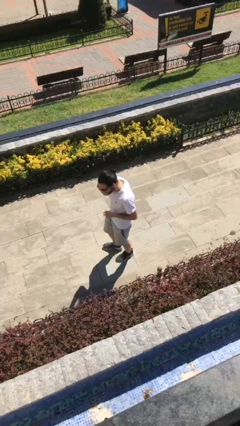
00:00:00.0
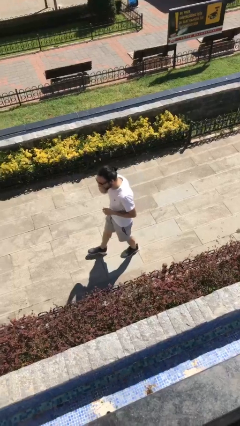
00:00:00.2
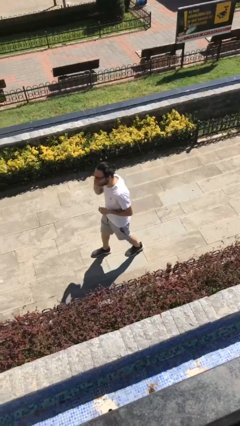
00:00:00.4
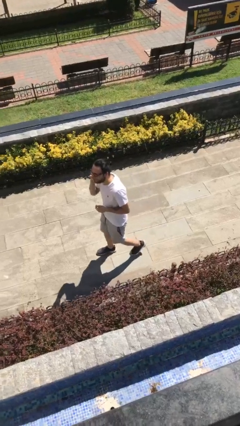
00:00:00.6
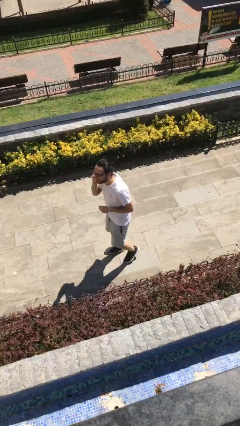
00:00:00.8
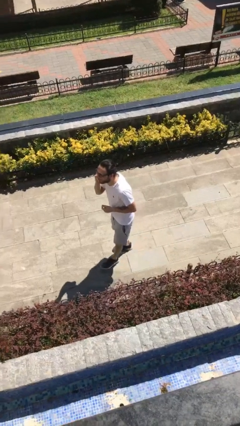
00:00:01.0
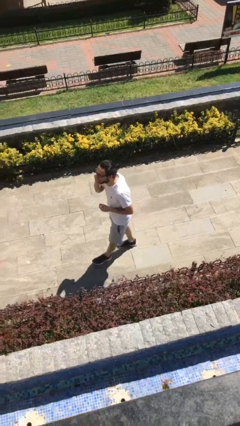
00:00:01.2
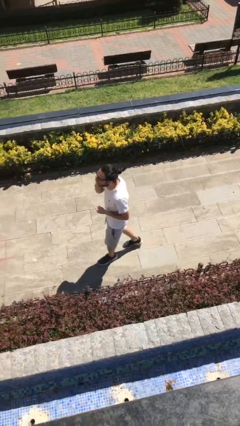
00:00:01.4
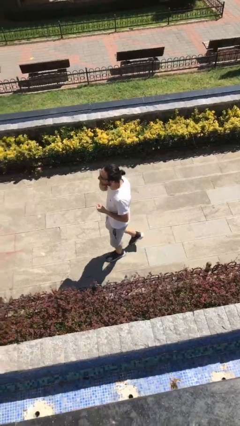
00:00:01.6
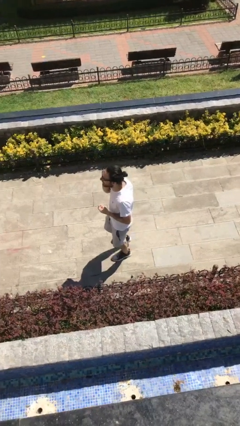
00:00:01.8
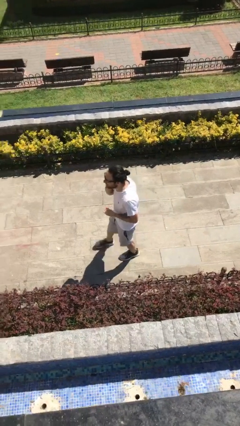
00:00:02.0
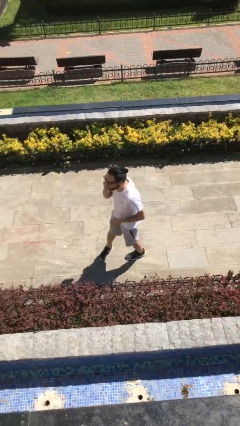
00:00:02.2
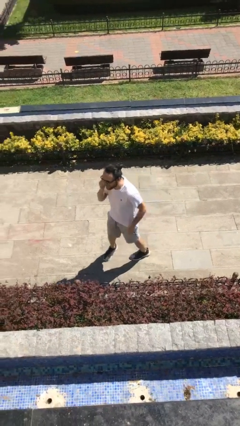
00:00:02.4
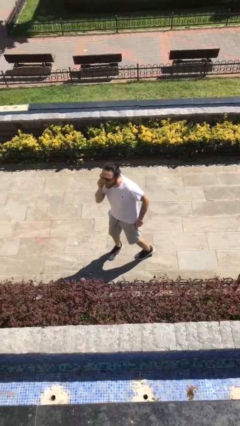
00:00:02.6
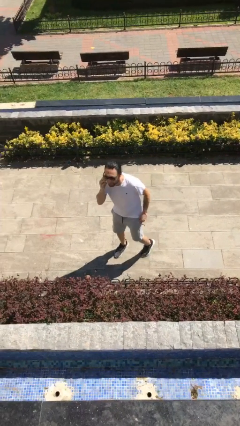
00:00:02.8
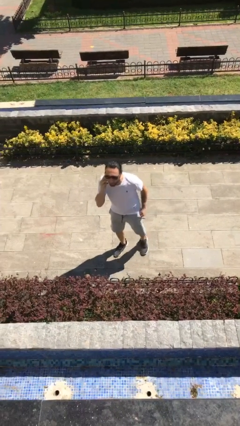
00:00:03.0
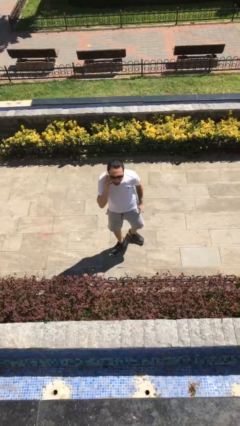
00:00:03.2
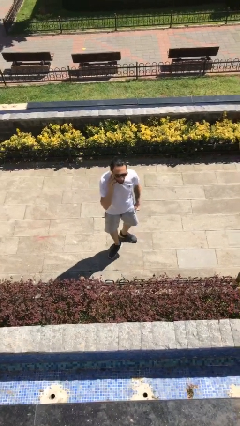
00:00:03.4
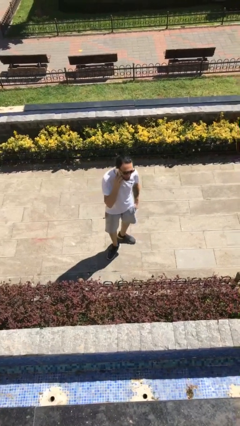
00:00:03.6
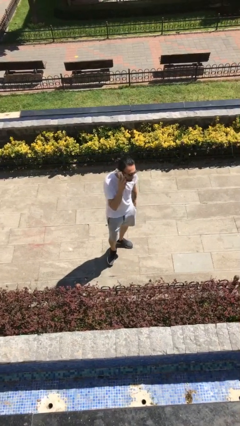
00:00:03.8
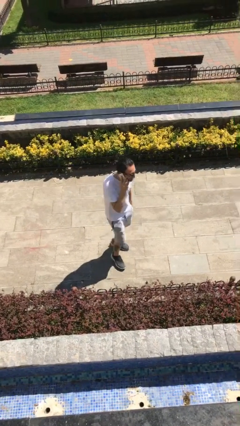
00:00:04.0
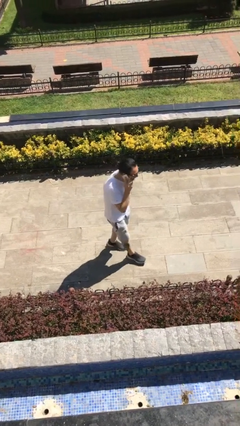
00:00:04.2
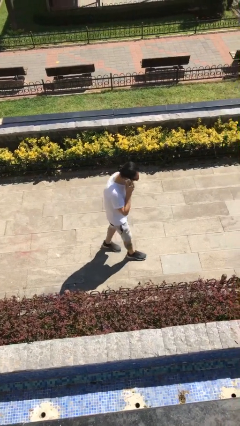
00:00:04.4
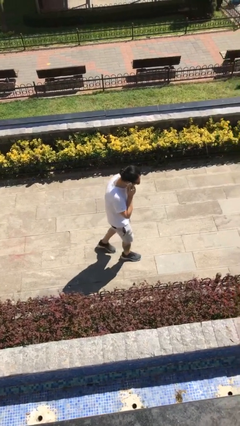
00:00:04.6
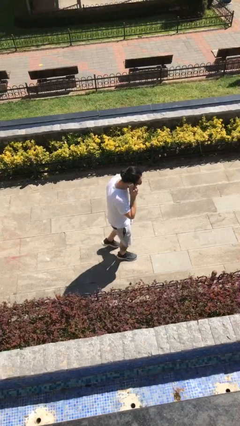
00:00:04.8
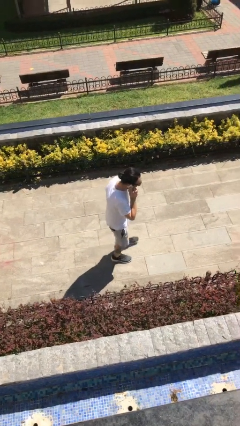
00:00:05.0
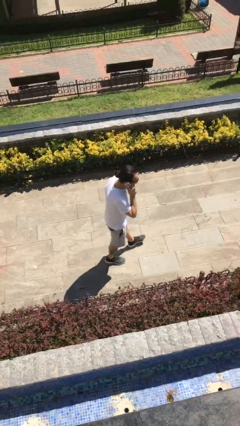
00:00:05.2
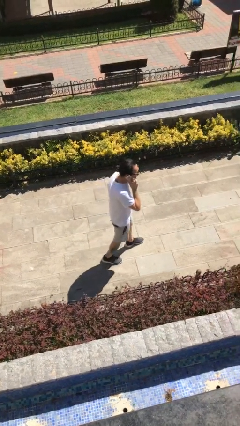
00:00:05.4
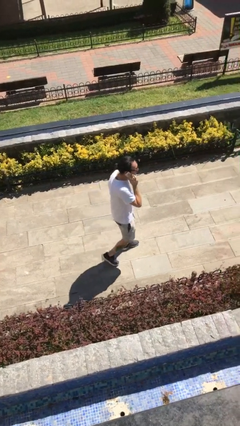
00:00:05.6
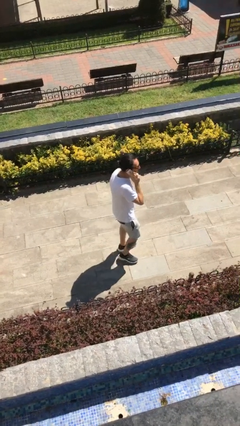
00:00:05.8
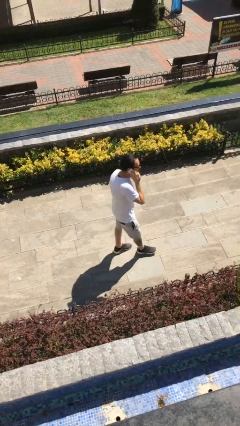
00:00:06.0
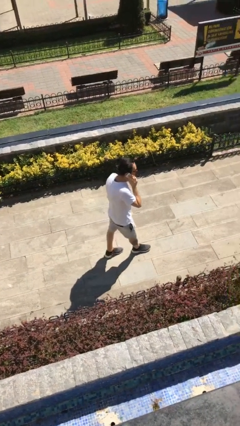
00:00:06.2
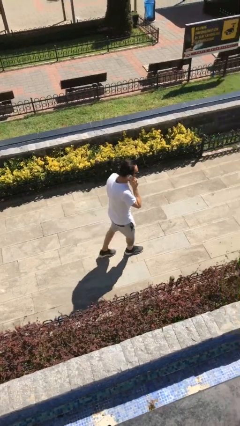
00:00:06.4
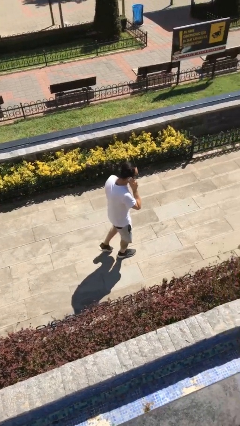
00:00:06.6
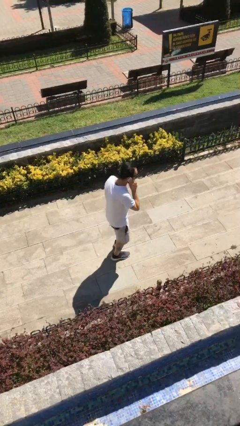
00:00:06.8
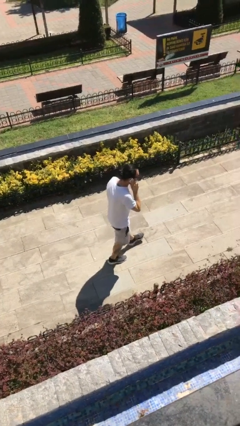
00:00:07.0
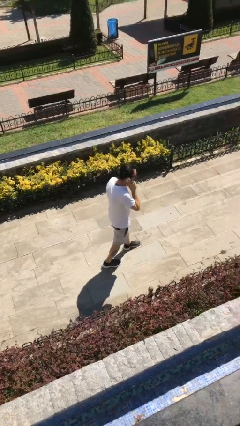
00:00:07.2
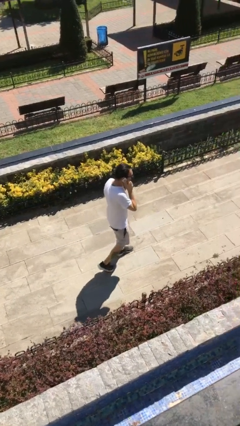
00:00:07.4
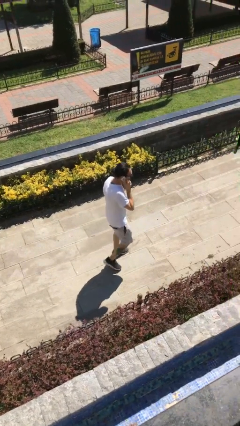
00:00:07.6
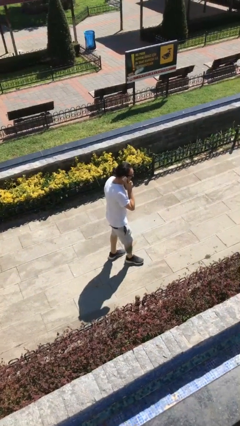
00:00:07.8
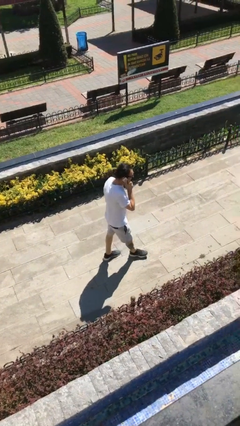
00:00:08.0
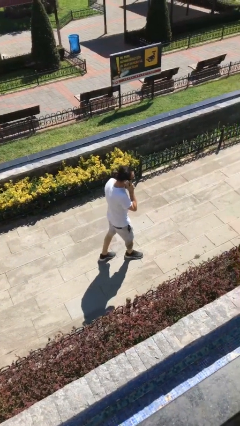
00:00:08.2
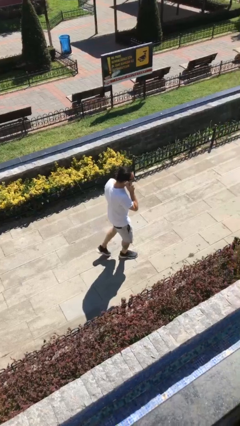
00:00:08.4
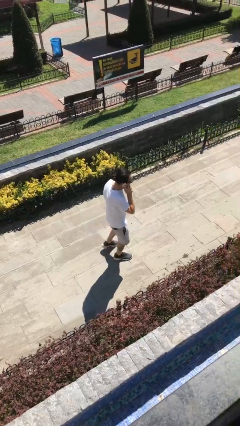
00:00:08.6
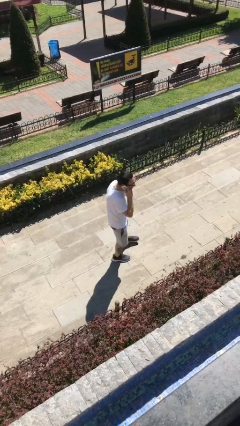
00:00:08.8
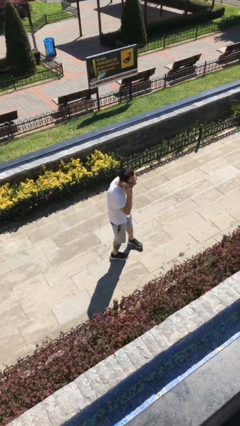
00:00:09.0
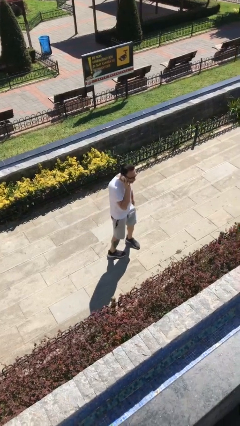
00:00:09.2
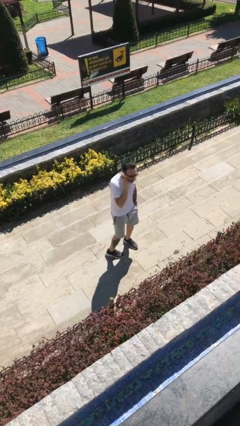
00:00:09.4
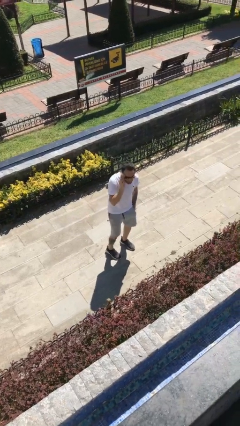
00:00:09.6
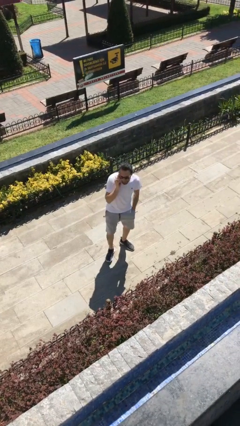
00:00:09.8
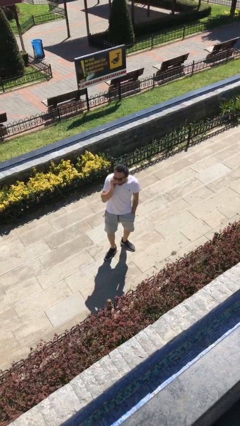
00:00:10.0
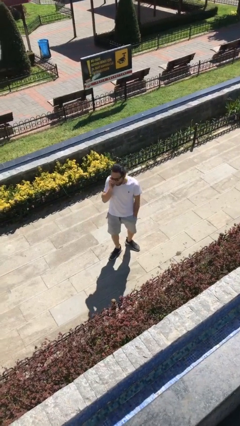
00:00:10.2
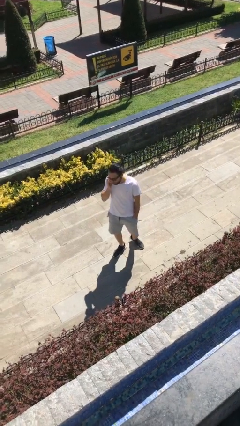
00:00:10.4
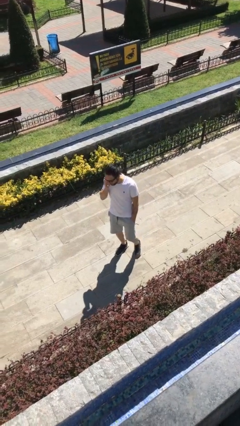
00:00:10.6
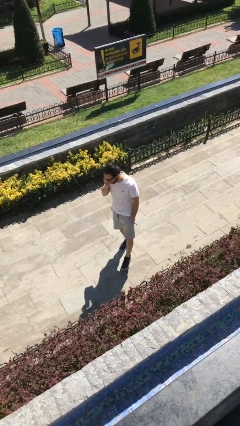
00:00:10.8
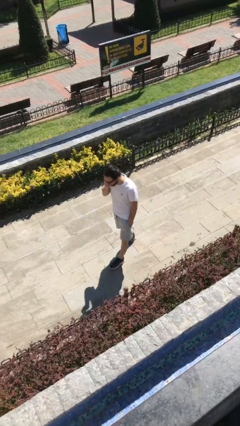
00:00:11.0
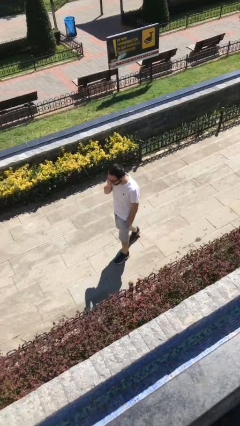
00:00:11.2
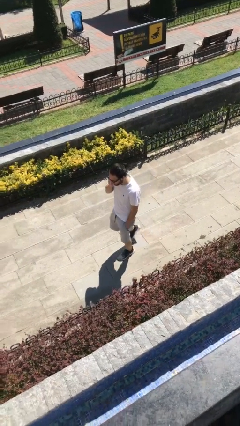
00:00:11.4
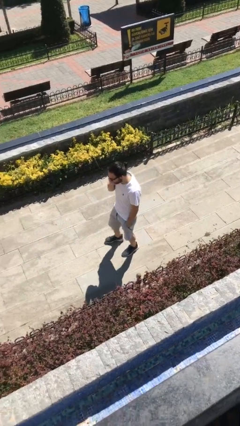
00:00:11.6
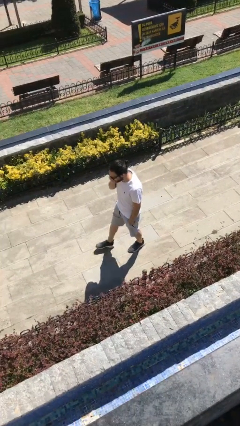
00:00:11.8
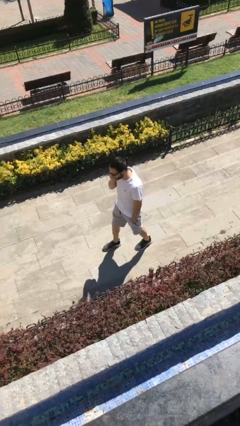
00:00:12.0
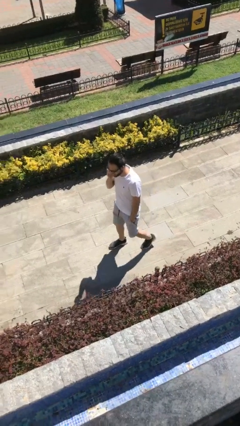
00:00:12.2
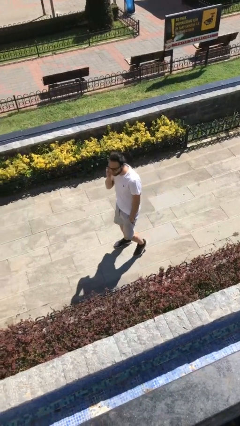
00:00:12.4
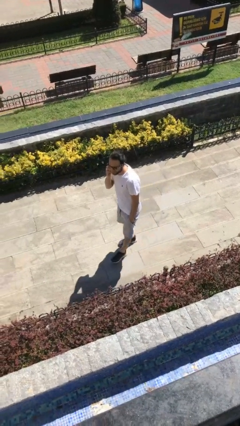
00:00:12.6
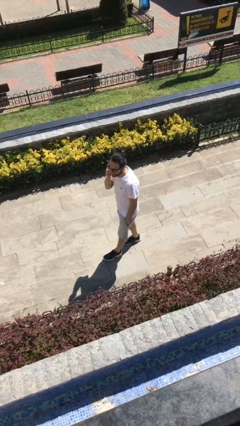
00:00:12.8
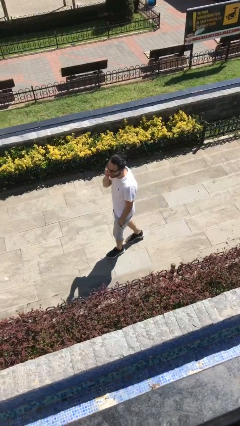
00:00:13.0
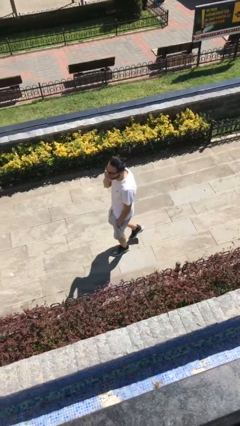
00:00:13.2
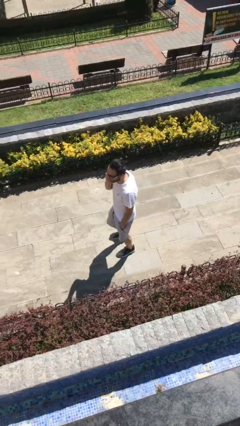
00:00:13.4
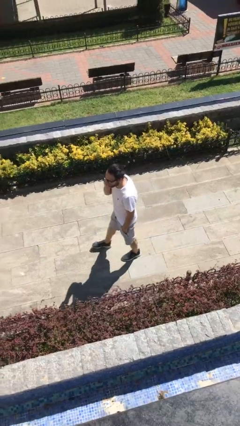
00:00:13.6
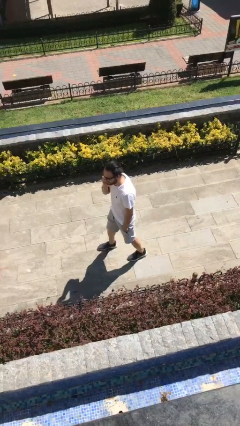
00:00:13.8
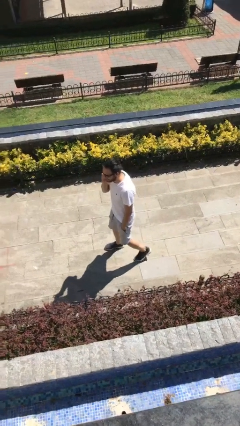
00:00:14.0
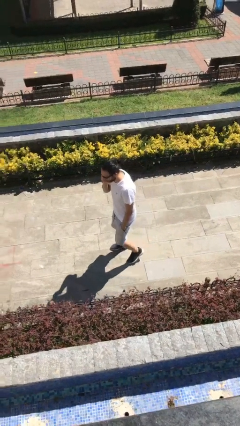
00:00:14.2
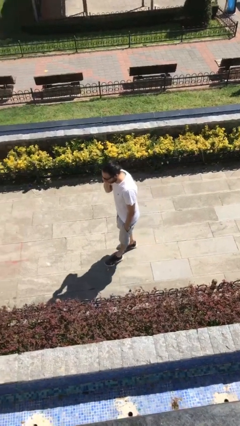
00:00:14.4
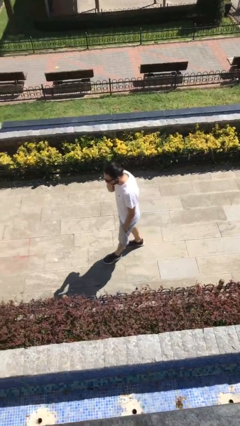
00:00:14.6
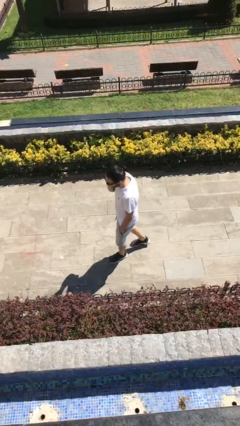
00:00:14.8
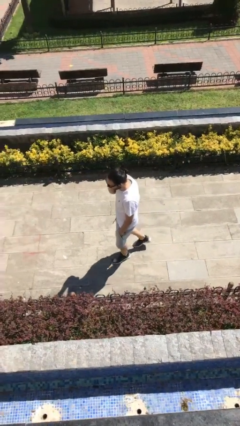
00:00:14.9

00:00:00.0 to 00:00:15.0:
person talks on phone

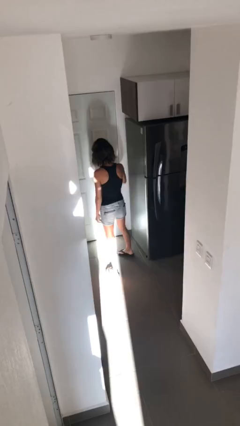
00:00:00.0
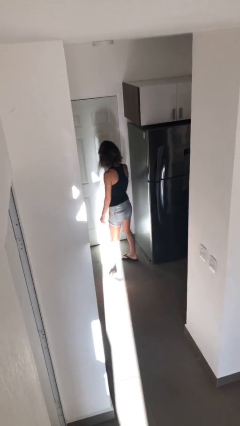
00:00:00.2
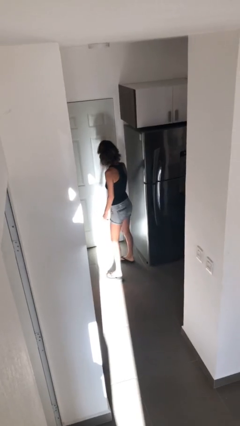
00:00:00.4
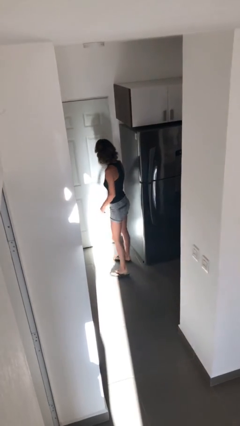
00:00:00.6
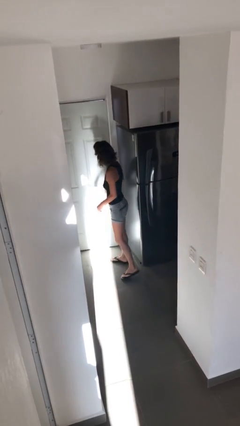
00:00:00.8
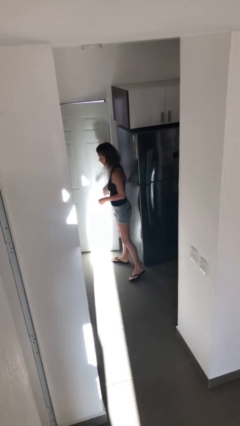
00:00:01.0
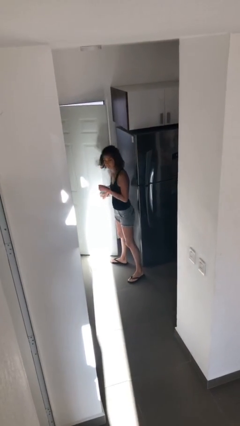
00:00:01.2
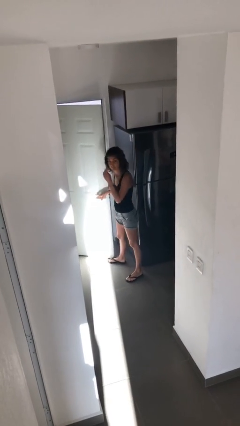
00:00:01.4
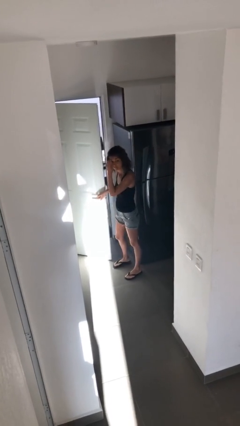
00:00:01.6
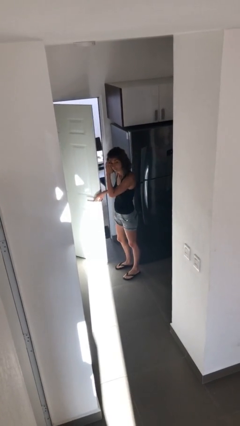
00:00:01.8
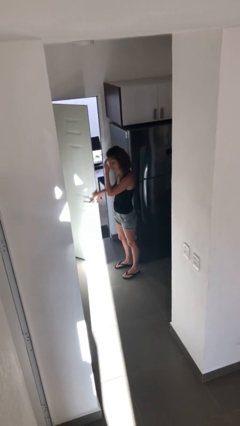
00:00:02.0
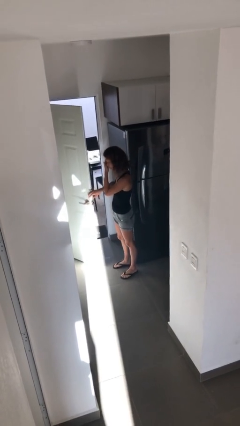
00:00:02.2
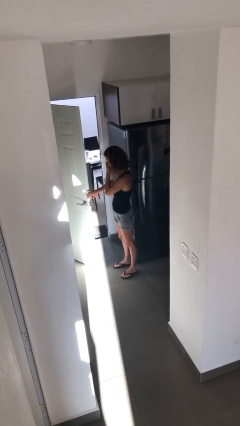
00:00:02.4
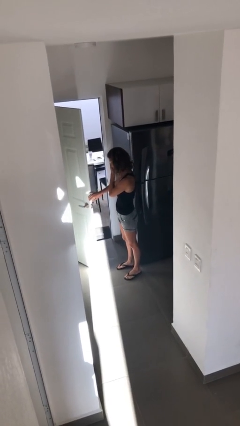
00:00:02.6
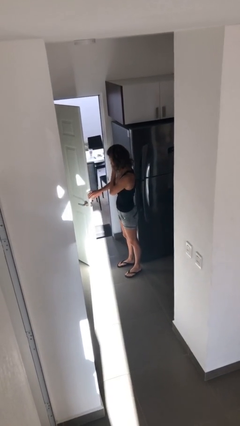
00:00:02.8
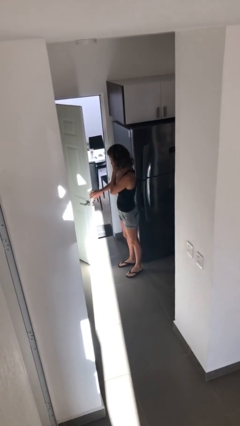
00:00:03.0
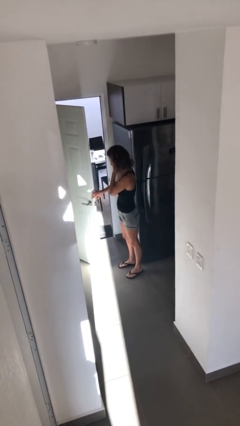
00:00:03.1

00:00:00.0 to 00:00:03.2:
person opens facility door

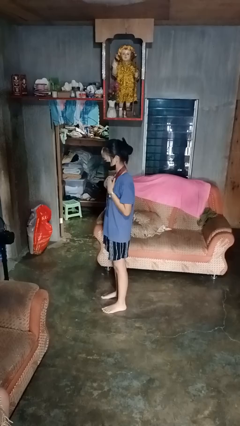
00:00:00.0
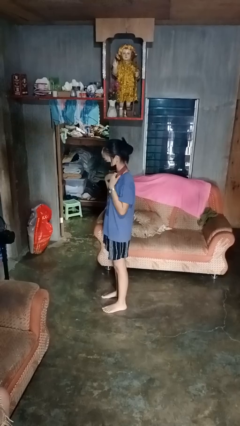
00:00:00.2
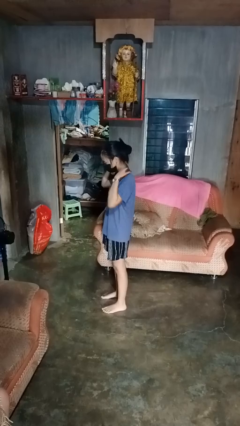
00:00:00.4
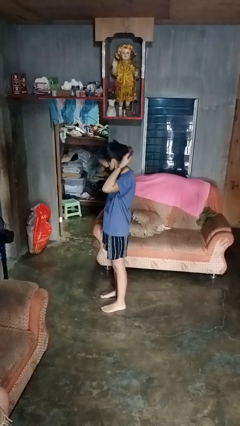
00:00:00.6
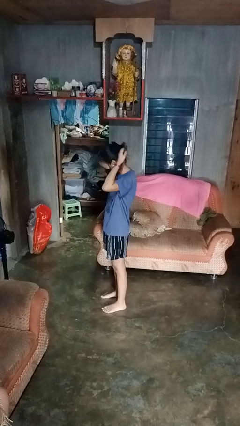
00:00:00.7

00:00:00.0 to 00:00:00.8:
person takes off necklace
